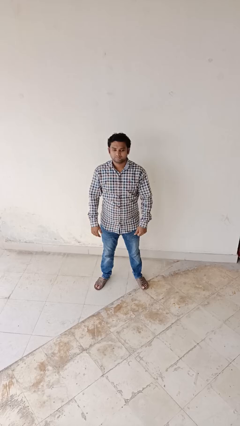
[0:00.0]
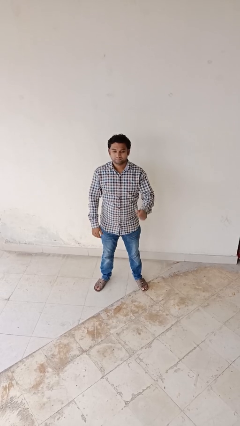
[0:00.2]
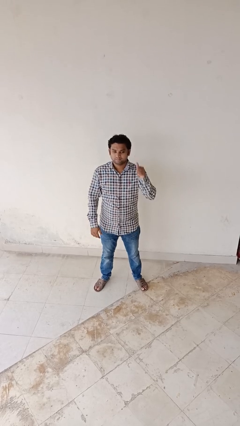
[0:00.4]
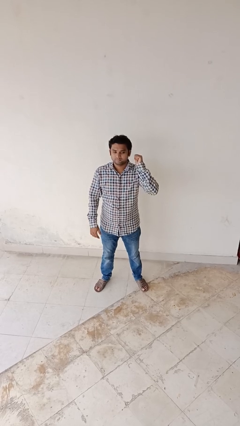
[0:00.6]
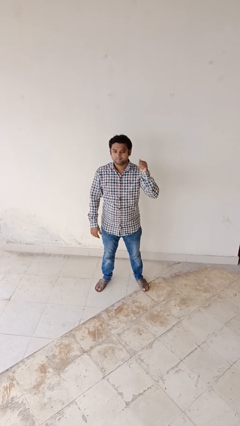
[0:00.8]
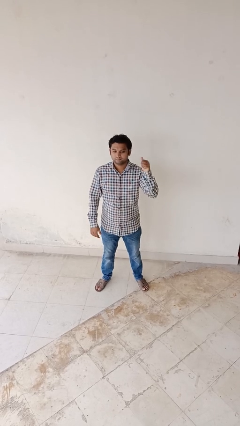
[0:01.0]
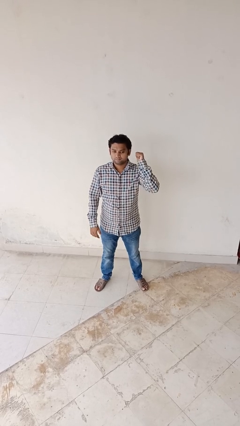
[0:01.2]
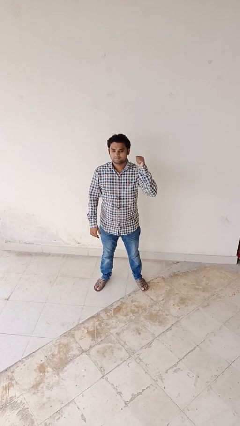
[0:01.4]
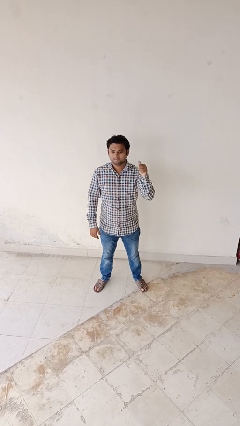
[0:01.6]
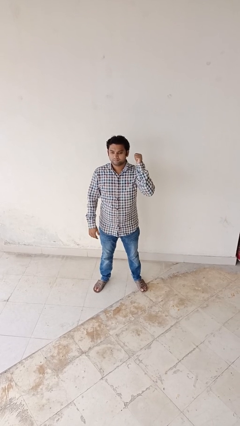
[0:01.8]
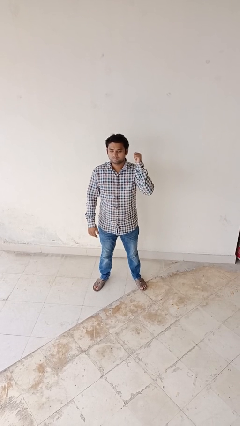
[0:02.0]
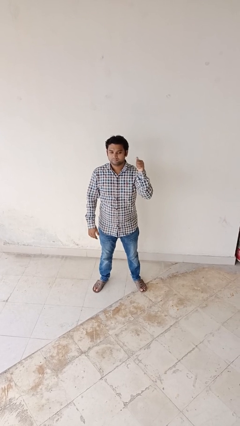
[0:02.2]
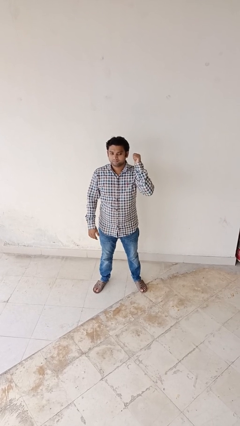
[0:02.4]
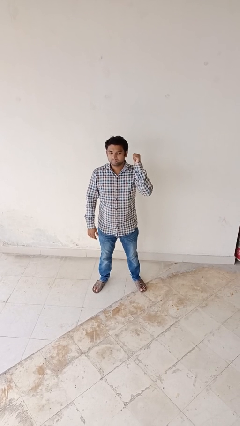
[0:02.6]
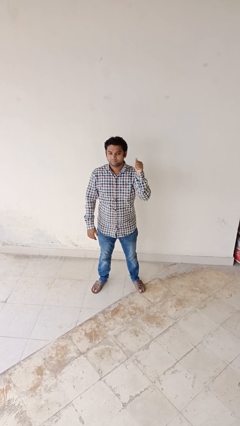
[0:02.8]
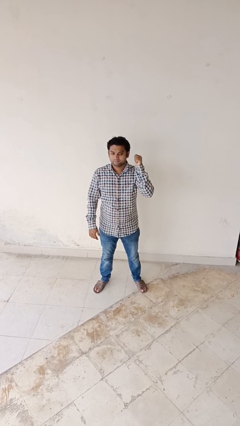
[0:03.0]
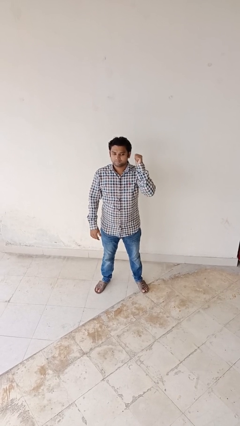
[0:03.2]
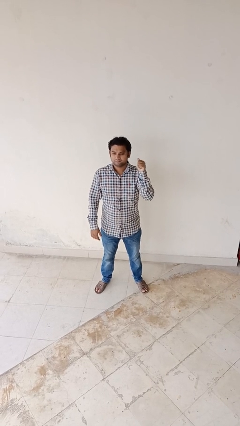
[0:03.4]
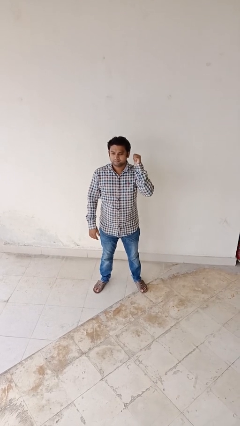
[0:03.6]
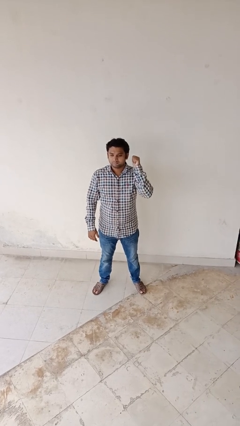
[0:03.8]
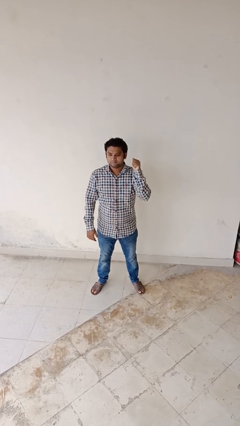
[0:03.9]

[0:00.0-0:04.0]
person gestures behind me

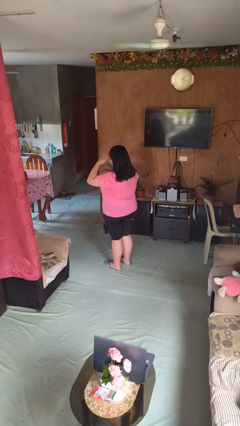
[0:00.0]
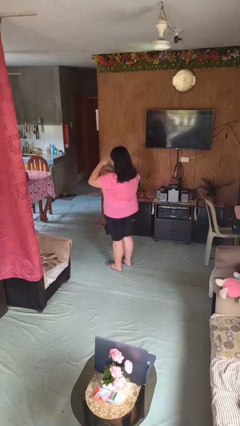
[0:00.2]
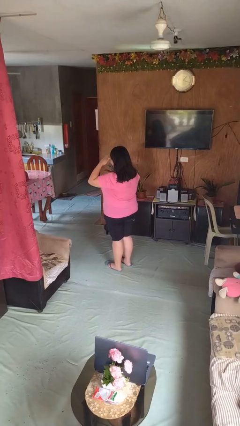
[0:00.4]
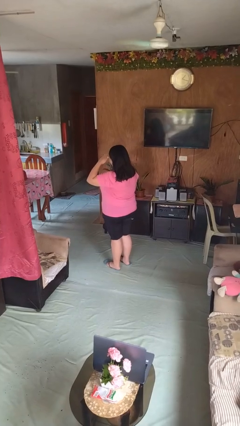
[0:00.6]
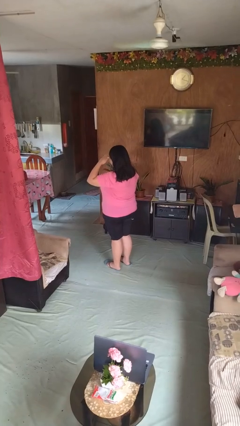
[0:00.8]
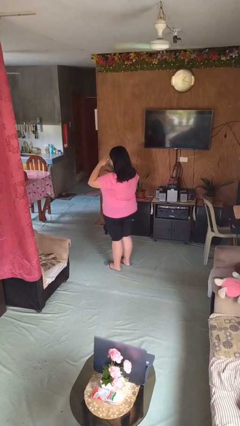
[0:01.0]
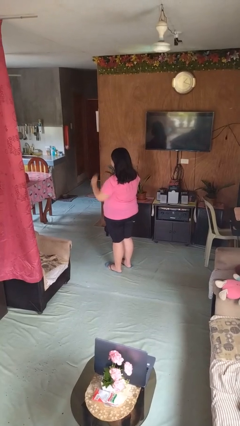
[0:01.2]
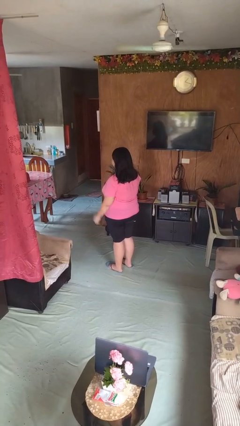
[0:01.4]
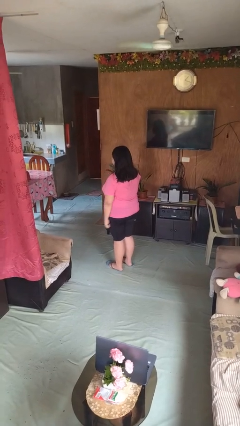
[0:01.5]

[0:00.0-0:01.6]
person salutes

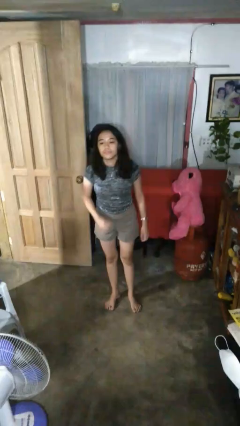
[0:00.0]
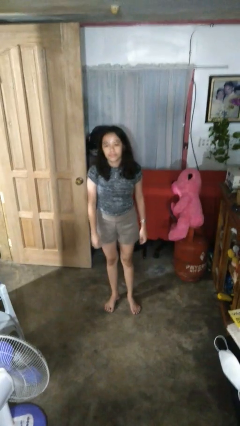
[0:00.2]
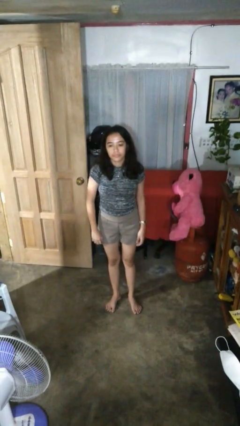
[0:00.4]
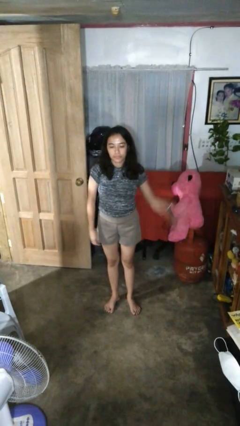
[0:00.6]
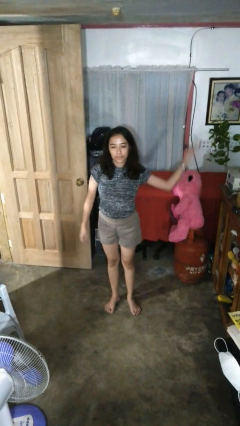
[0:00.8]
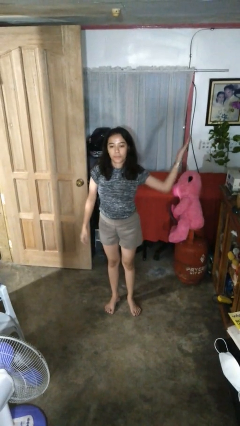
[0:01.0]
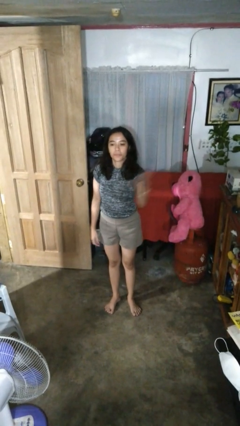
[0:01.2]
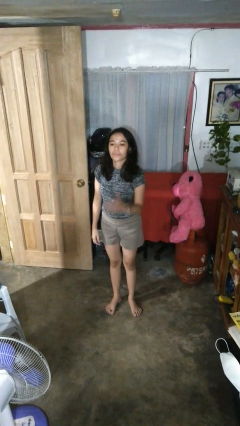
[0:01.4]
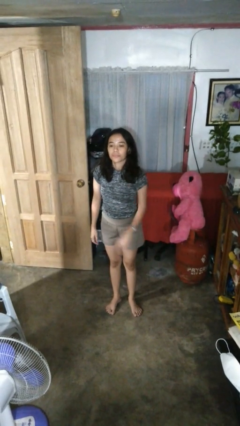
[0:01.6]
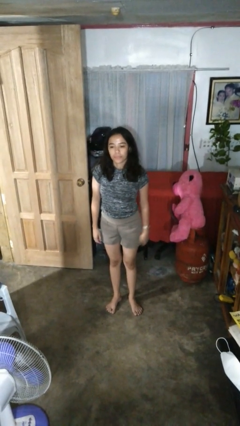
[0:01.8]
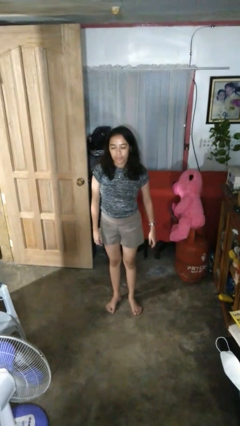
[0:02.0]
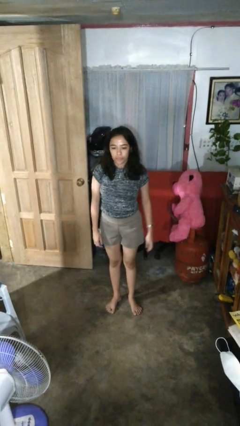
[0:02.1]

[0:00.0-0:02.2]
person karate chop

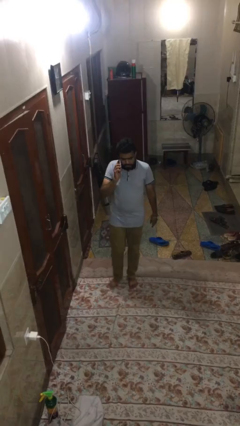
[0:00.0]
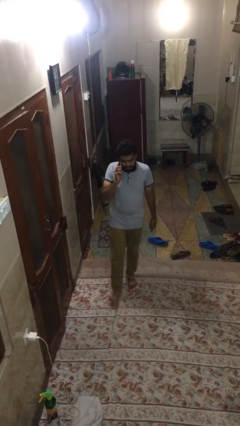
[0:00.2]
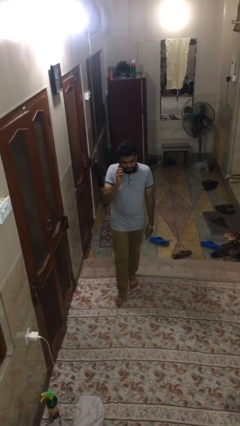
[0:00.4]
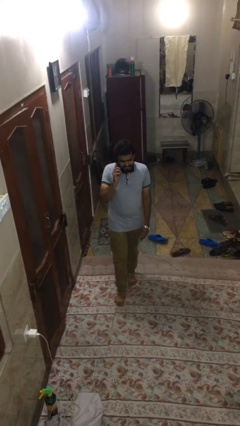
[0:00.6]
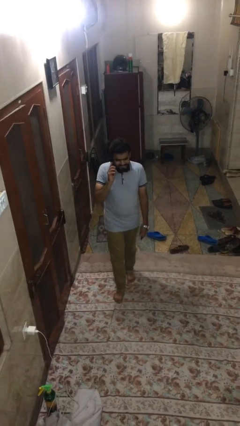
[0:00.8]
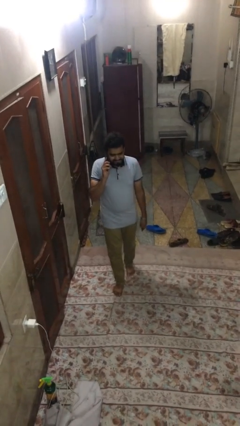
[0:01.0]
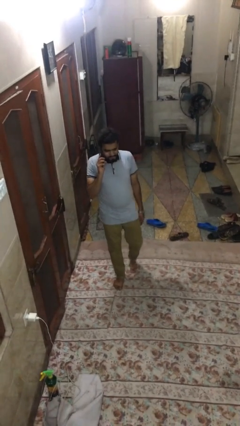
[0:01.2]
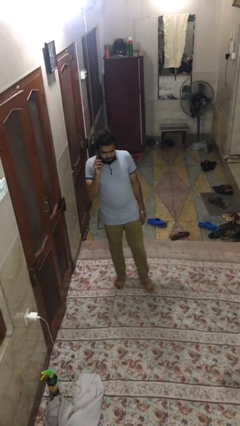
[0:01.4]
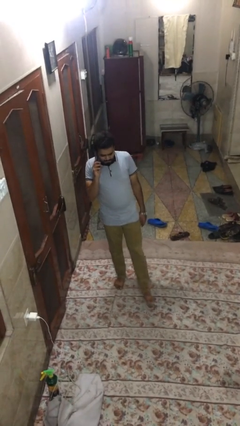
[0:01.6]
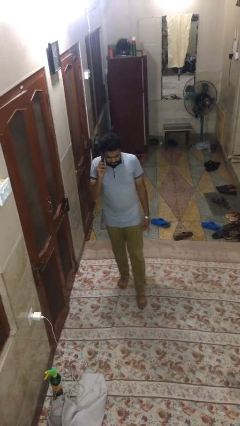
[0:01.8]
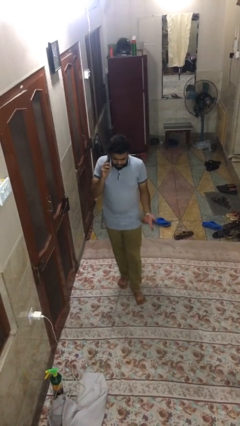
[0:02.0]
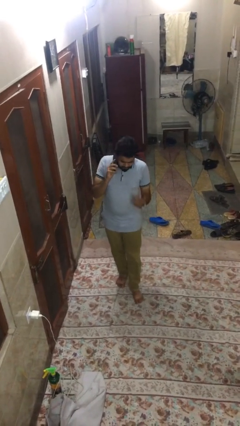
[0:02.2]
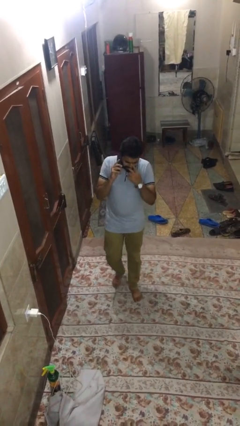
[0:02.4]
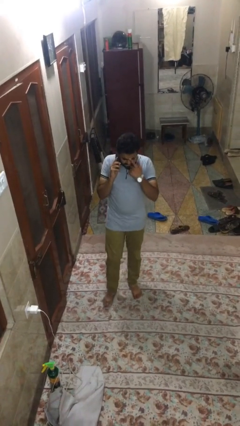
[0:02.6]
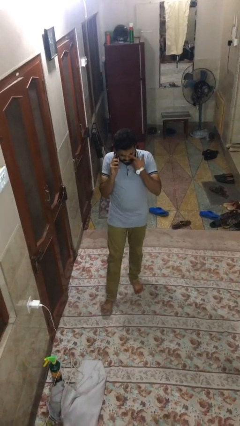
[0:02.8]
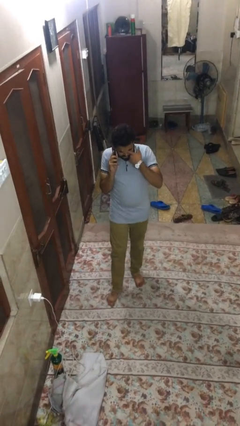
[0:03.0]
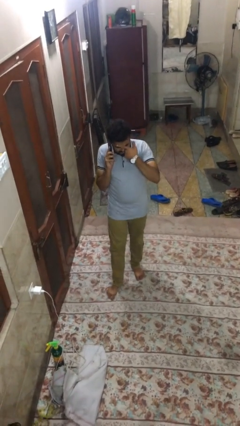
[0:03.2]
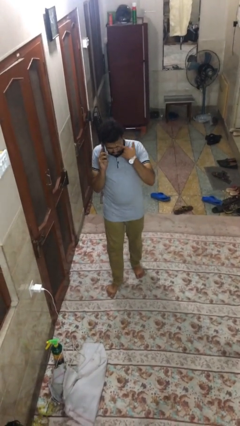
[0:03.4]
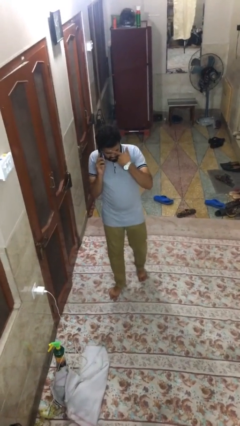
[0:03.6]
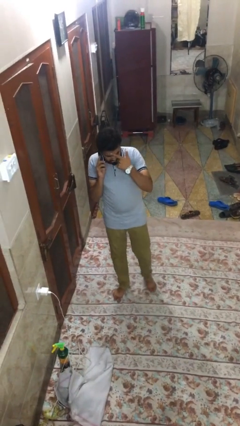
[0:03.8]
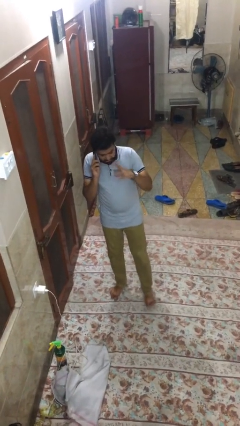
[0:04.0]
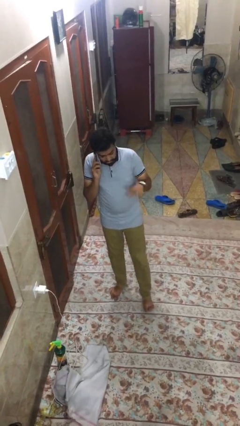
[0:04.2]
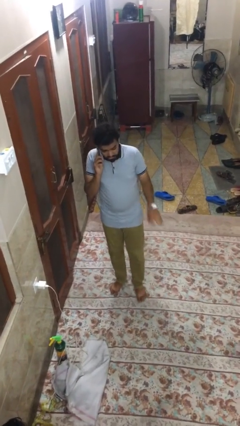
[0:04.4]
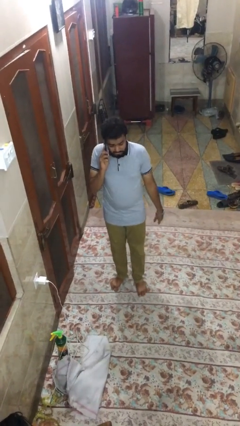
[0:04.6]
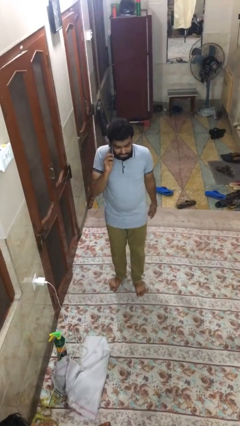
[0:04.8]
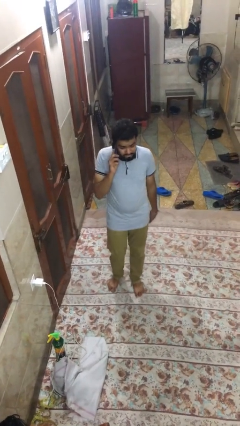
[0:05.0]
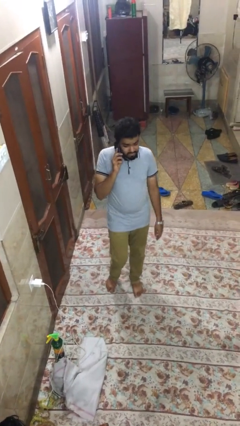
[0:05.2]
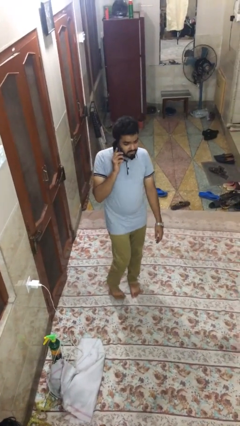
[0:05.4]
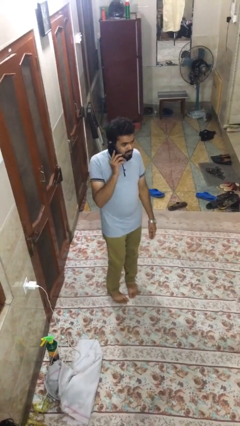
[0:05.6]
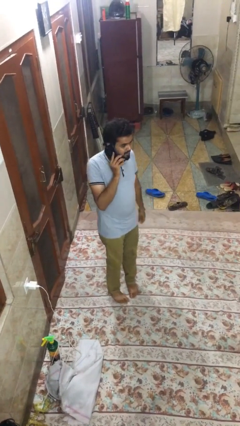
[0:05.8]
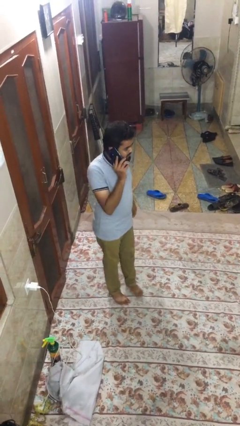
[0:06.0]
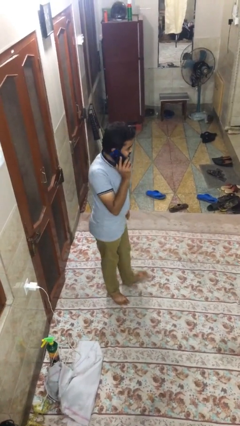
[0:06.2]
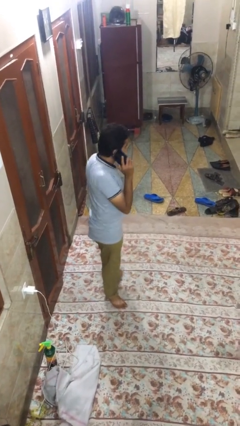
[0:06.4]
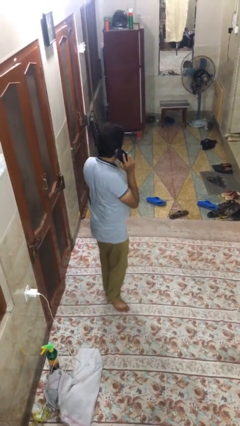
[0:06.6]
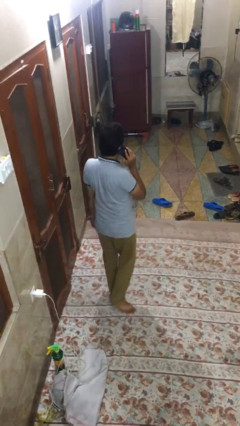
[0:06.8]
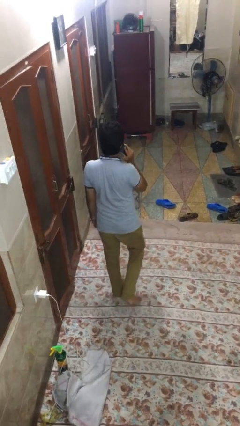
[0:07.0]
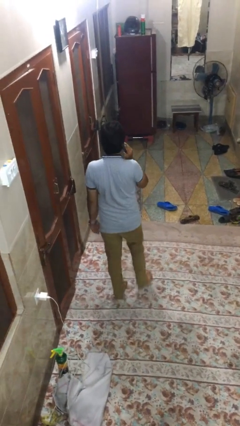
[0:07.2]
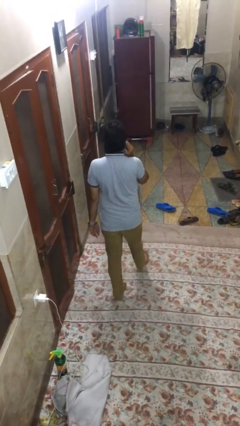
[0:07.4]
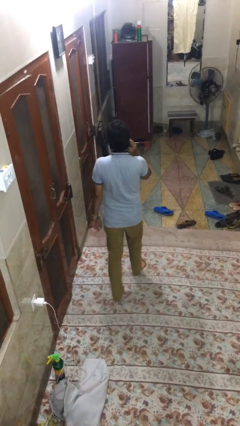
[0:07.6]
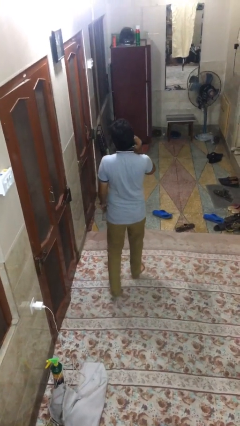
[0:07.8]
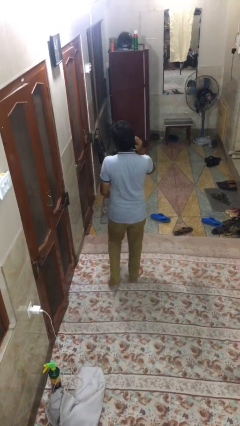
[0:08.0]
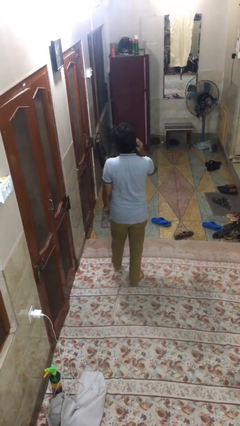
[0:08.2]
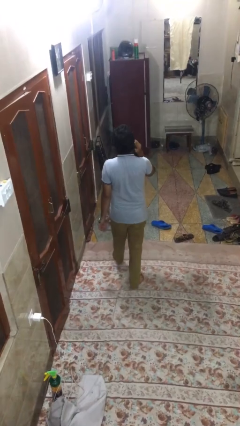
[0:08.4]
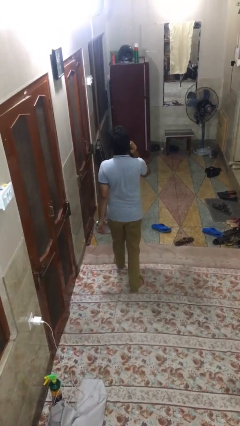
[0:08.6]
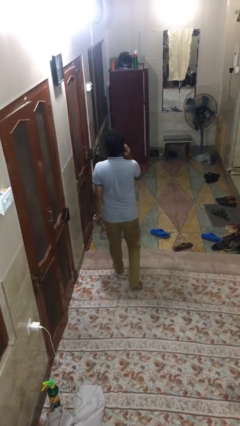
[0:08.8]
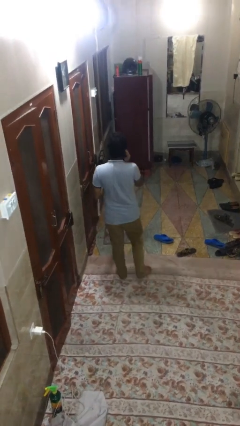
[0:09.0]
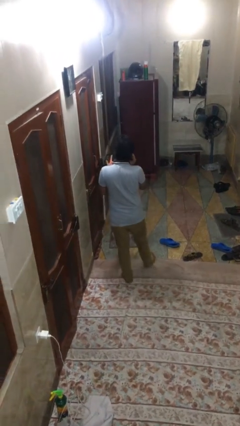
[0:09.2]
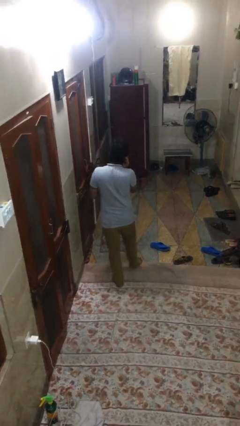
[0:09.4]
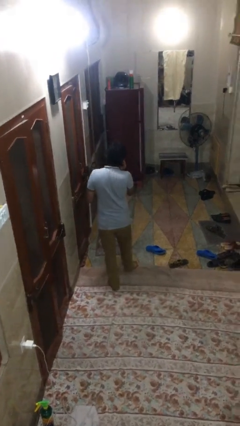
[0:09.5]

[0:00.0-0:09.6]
person talks on phone

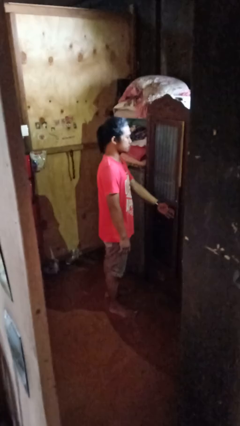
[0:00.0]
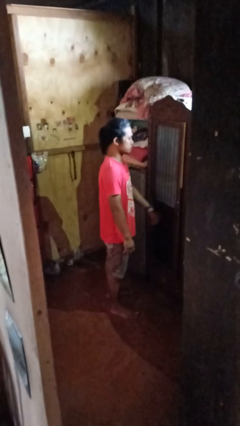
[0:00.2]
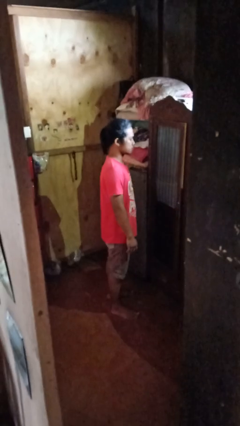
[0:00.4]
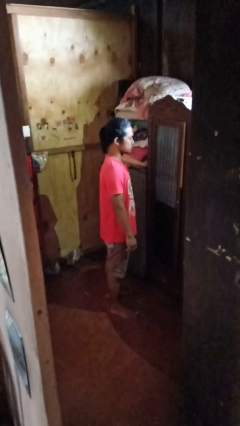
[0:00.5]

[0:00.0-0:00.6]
person closes closet door
